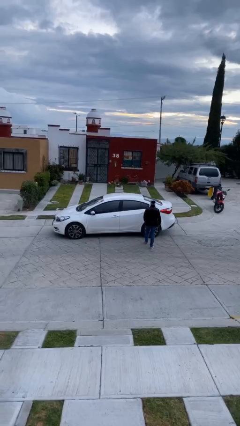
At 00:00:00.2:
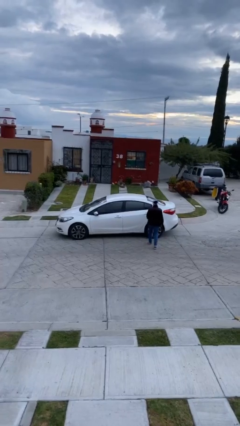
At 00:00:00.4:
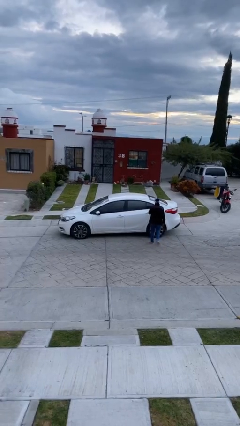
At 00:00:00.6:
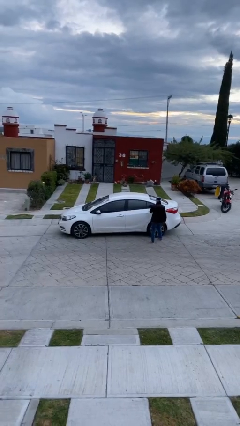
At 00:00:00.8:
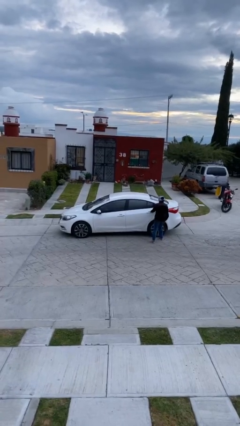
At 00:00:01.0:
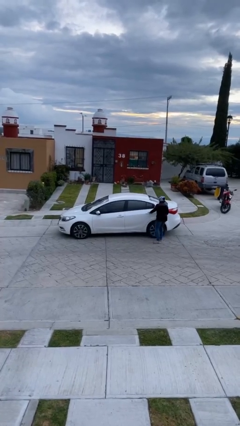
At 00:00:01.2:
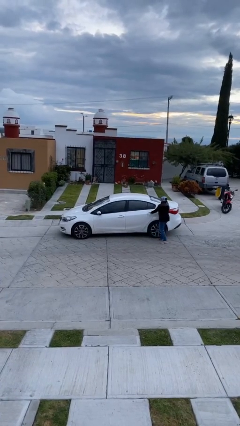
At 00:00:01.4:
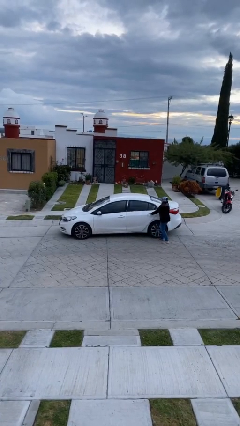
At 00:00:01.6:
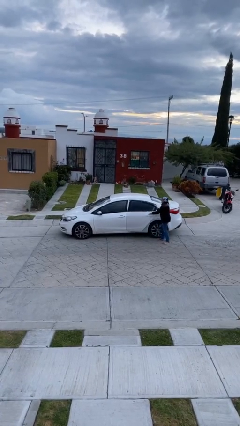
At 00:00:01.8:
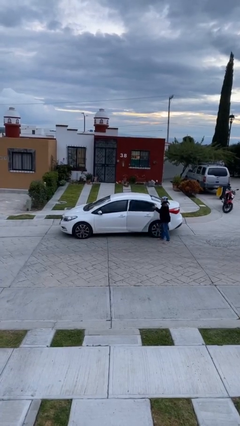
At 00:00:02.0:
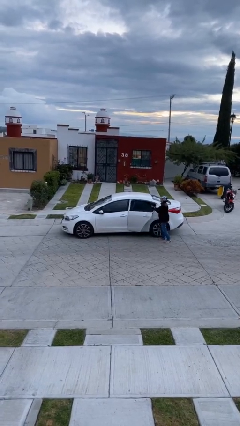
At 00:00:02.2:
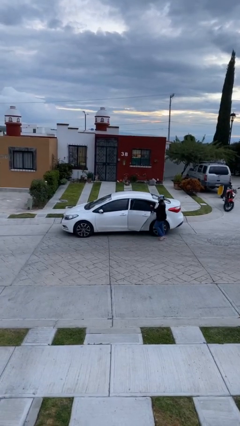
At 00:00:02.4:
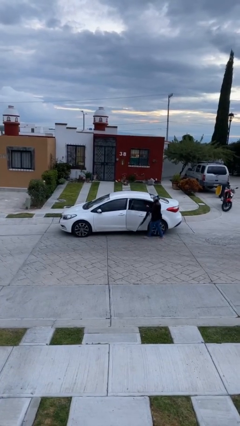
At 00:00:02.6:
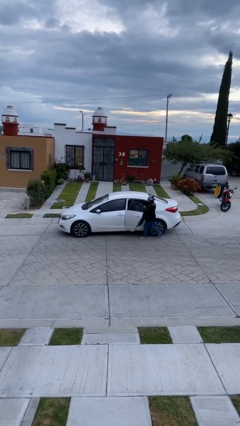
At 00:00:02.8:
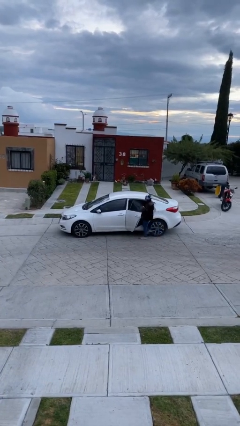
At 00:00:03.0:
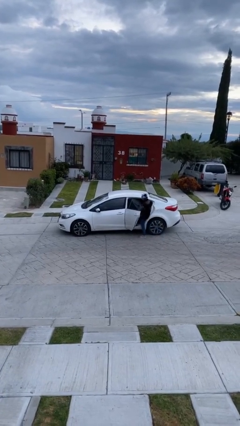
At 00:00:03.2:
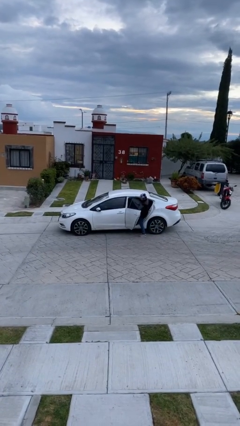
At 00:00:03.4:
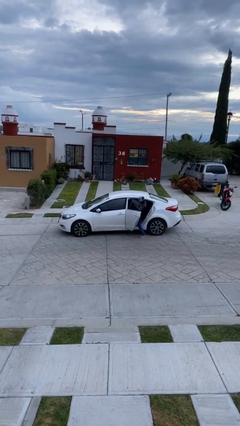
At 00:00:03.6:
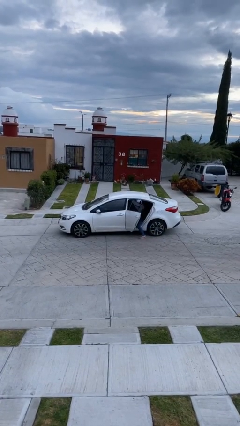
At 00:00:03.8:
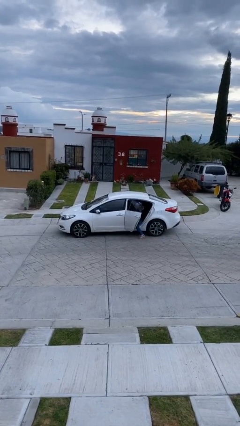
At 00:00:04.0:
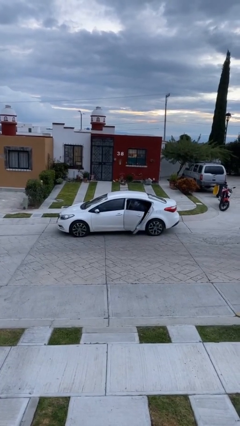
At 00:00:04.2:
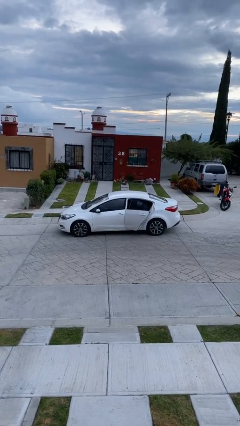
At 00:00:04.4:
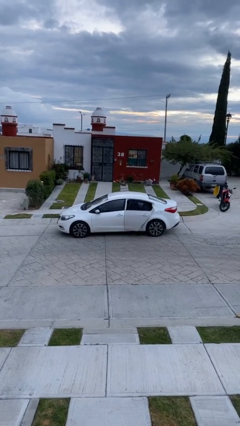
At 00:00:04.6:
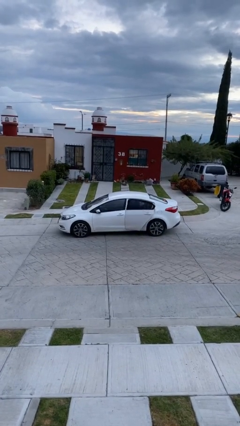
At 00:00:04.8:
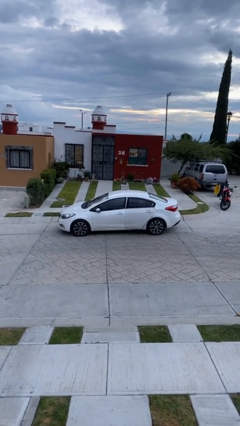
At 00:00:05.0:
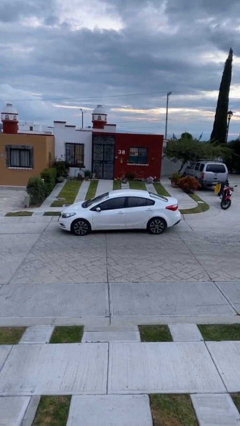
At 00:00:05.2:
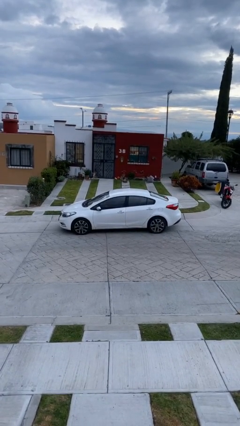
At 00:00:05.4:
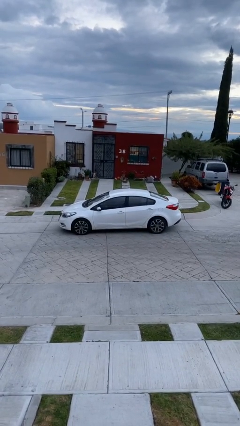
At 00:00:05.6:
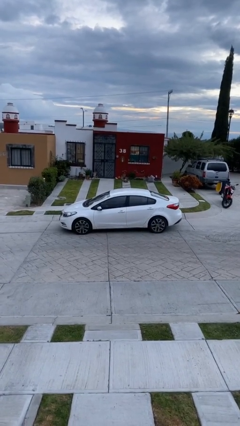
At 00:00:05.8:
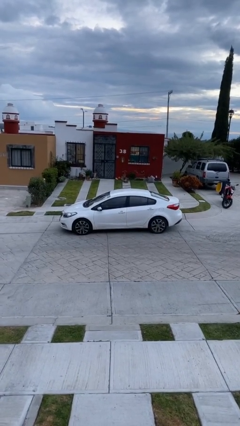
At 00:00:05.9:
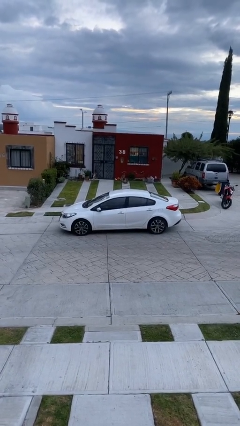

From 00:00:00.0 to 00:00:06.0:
car picks up person

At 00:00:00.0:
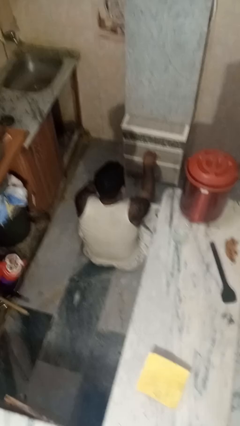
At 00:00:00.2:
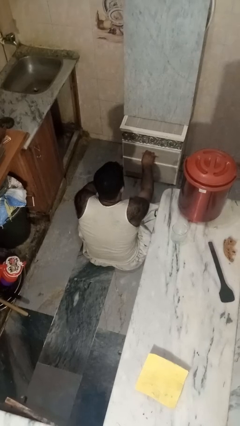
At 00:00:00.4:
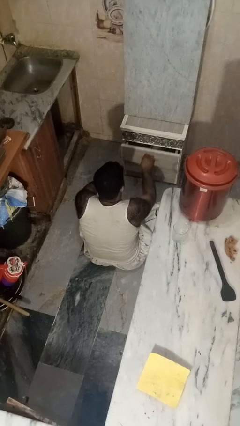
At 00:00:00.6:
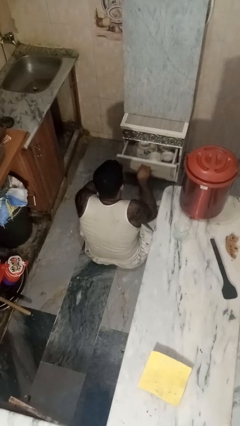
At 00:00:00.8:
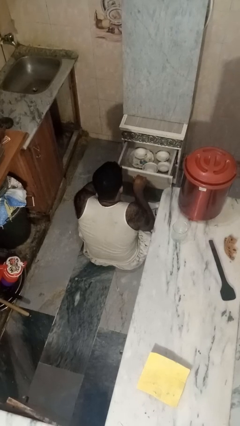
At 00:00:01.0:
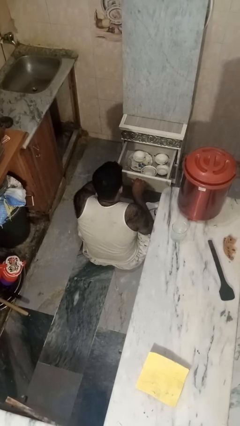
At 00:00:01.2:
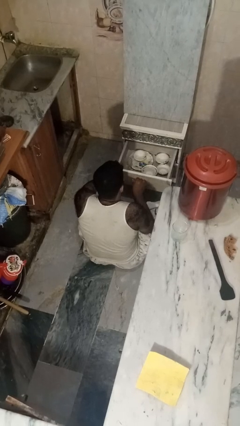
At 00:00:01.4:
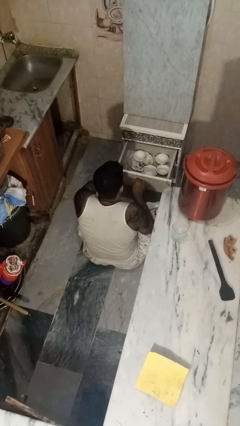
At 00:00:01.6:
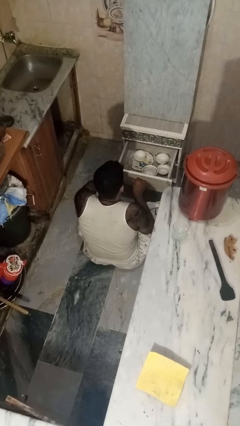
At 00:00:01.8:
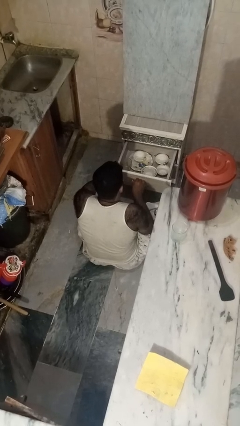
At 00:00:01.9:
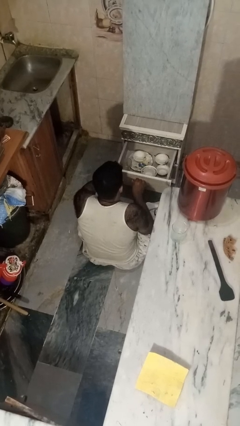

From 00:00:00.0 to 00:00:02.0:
person opens kitchen drawer

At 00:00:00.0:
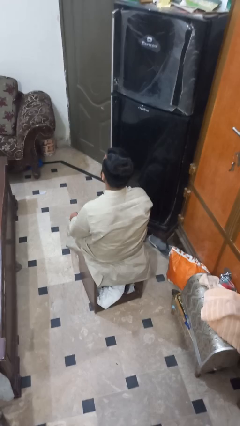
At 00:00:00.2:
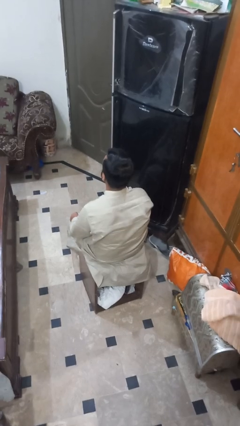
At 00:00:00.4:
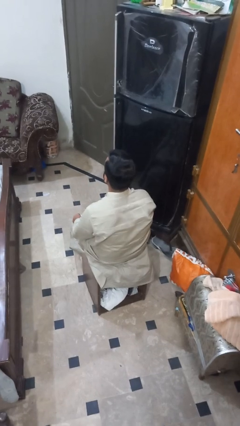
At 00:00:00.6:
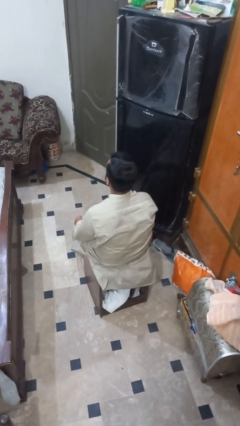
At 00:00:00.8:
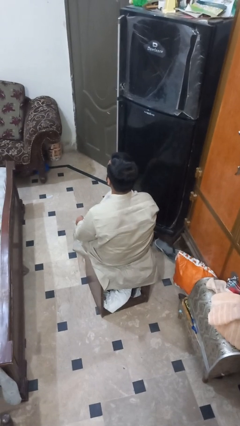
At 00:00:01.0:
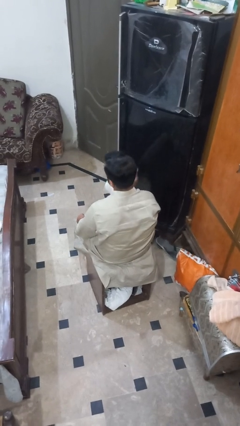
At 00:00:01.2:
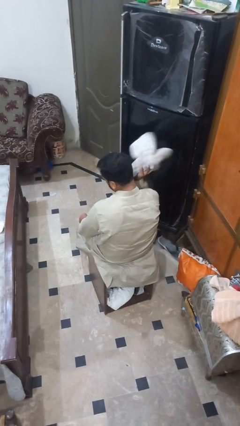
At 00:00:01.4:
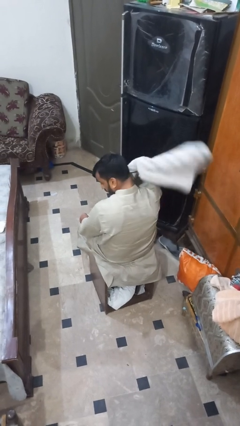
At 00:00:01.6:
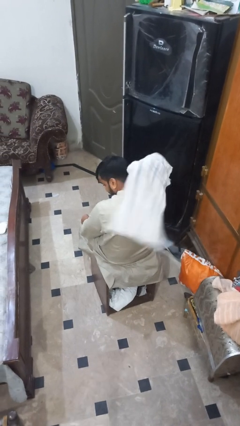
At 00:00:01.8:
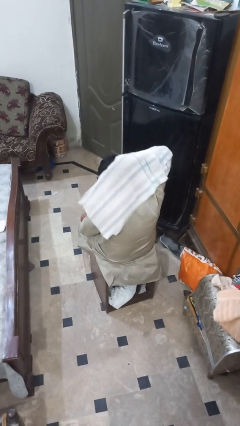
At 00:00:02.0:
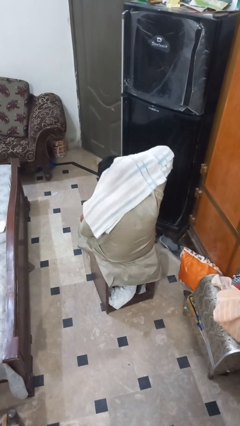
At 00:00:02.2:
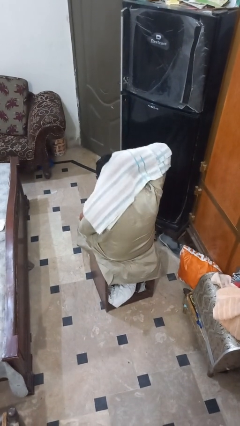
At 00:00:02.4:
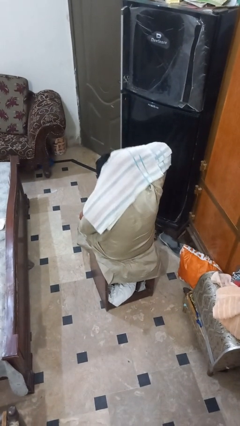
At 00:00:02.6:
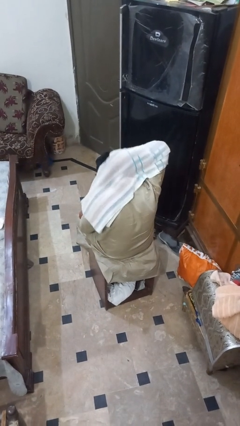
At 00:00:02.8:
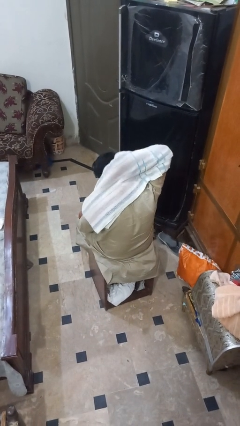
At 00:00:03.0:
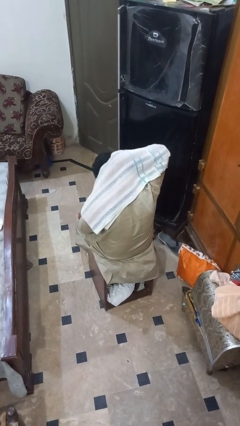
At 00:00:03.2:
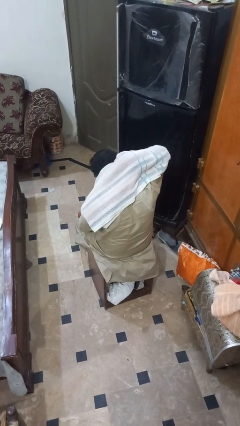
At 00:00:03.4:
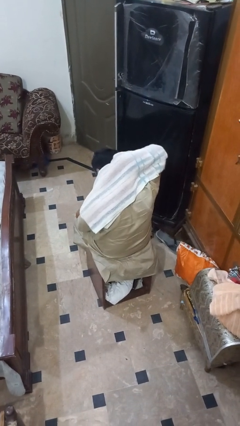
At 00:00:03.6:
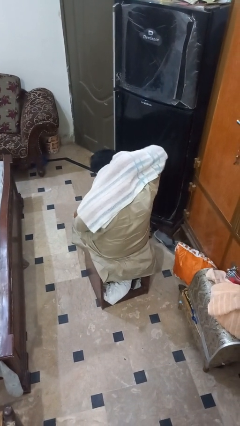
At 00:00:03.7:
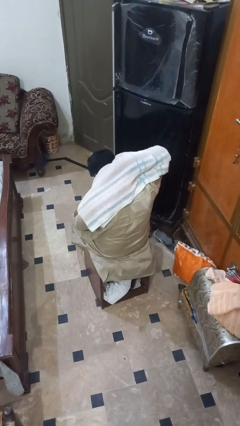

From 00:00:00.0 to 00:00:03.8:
person dries hair with towel

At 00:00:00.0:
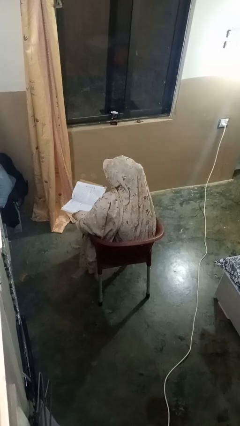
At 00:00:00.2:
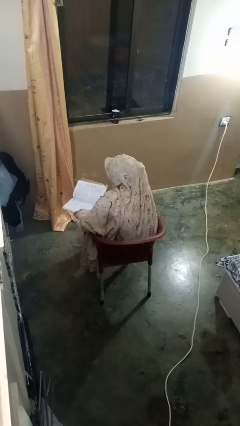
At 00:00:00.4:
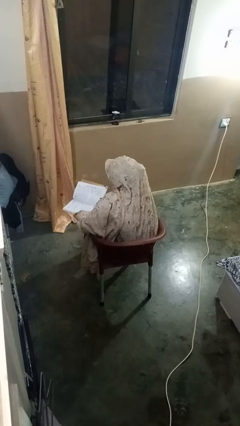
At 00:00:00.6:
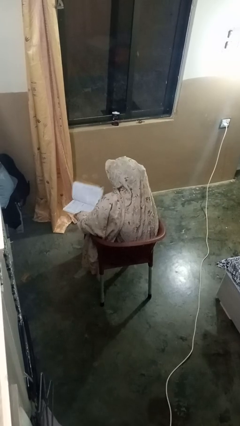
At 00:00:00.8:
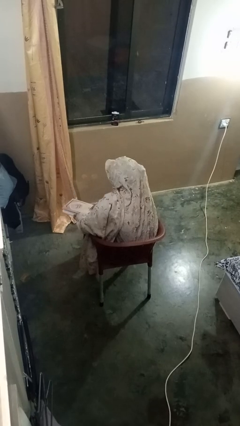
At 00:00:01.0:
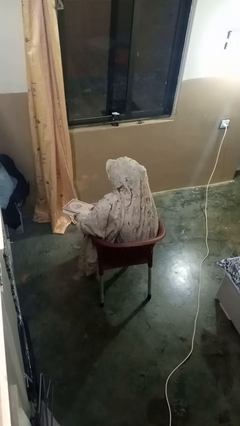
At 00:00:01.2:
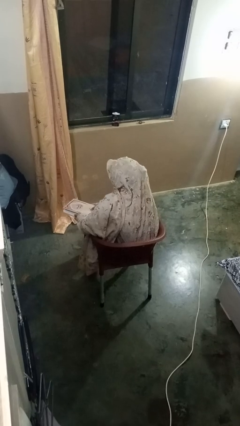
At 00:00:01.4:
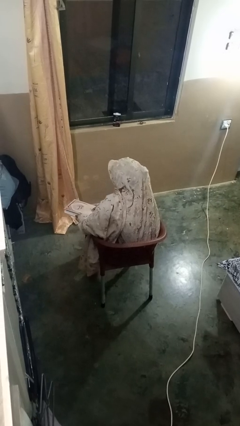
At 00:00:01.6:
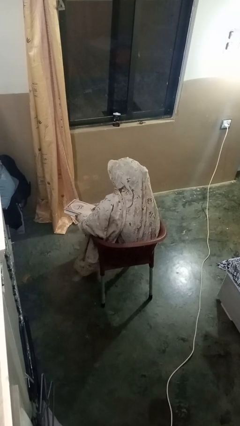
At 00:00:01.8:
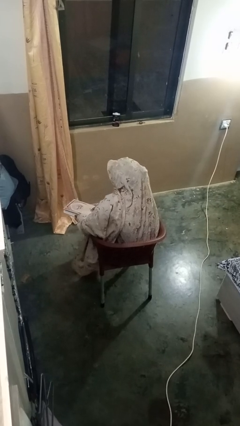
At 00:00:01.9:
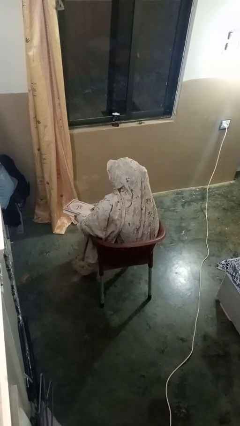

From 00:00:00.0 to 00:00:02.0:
person reads book

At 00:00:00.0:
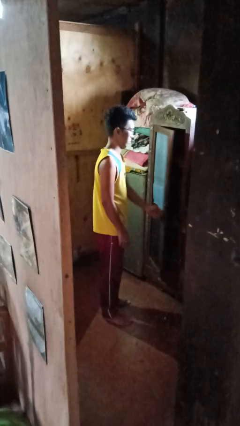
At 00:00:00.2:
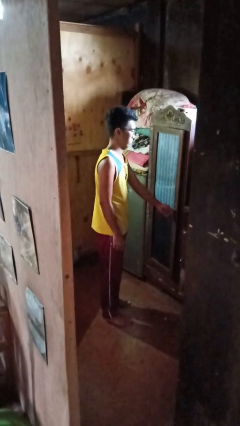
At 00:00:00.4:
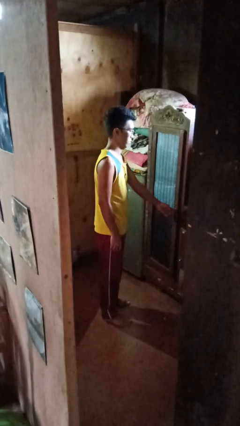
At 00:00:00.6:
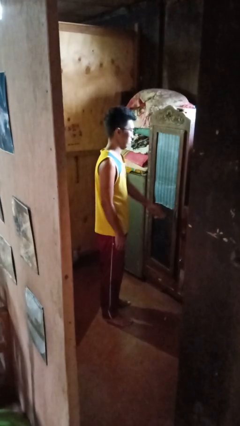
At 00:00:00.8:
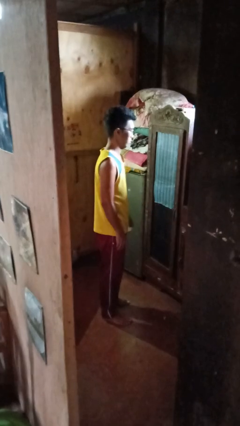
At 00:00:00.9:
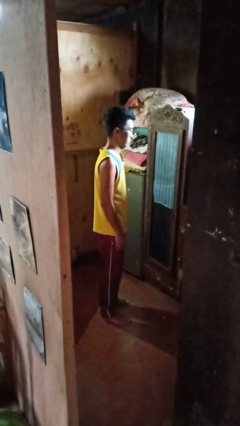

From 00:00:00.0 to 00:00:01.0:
person closes closet door

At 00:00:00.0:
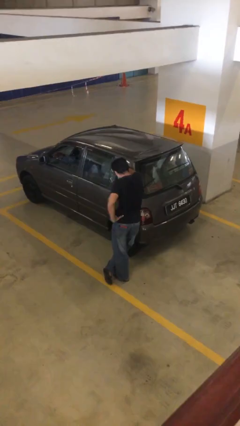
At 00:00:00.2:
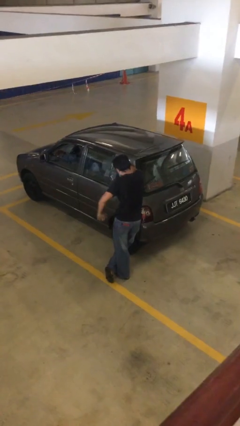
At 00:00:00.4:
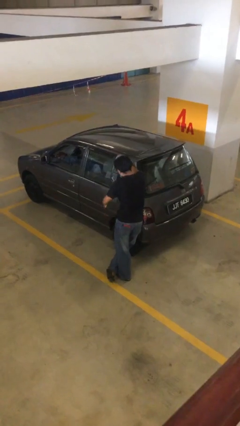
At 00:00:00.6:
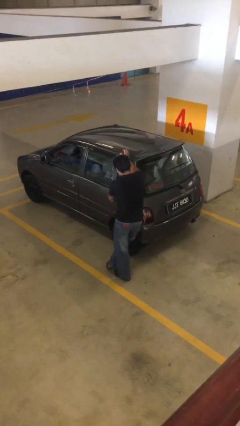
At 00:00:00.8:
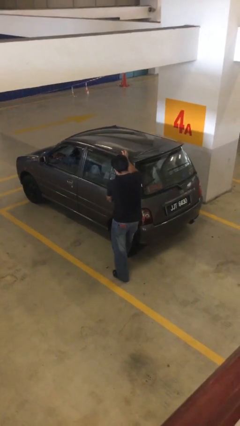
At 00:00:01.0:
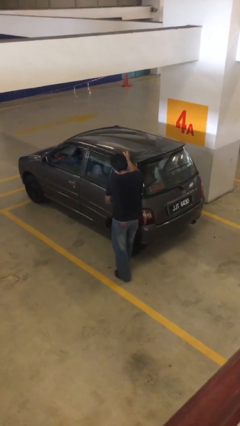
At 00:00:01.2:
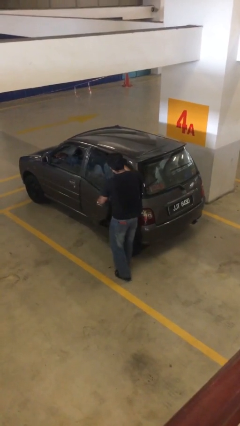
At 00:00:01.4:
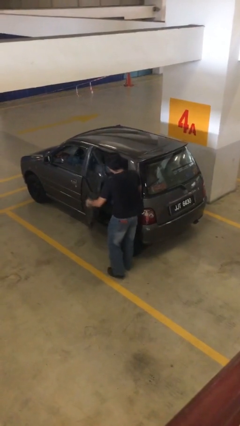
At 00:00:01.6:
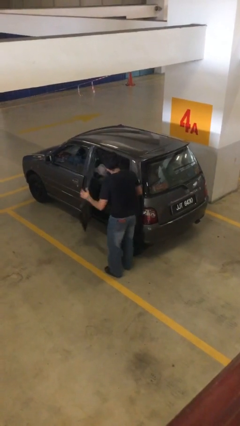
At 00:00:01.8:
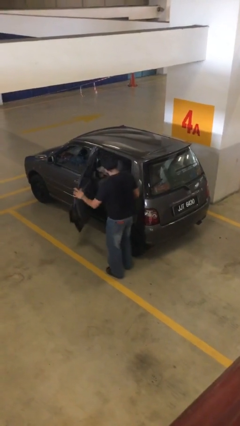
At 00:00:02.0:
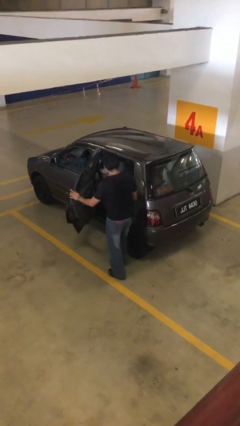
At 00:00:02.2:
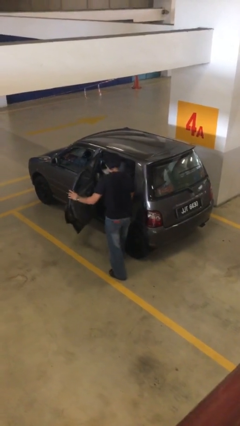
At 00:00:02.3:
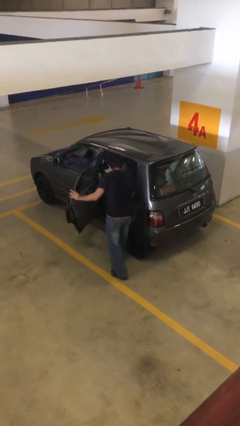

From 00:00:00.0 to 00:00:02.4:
person opens car door
